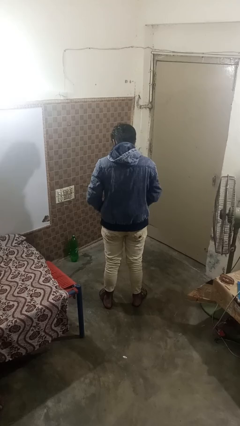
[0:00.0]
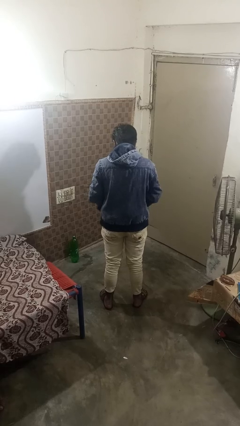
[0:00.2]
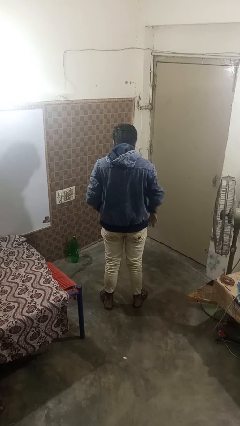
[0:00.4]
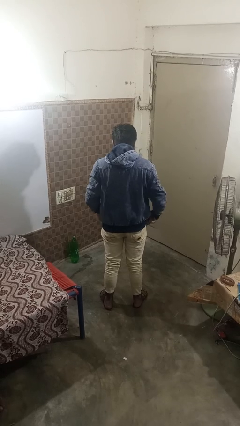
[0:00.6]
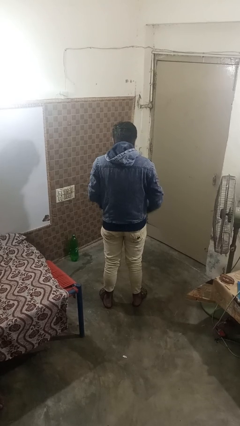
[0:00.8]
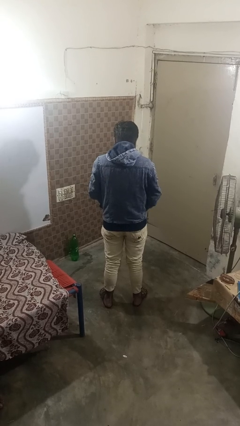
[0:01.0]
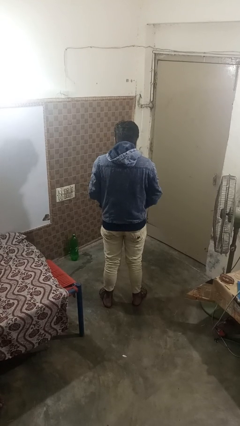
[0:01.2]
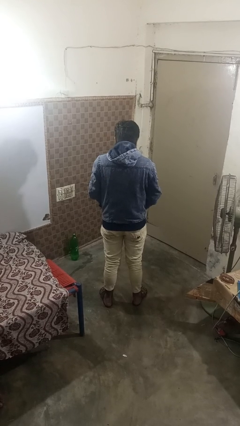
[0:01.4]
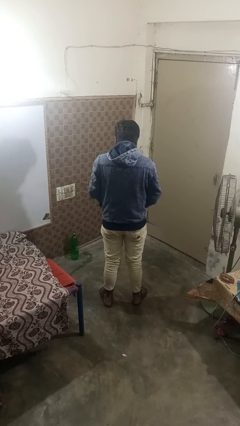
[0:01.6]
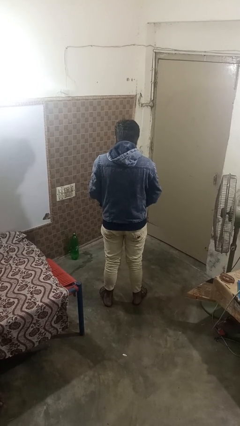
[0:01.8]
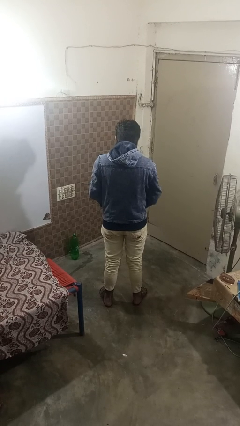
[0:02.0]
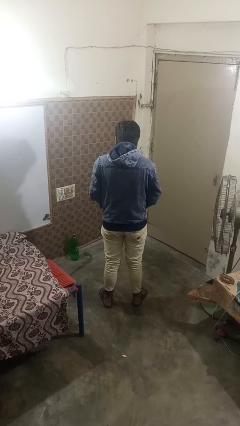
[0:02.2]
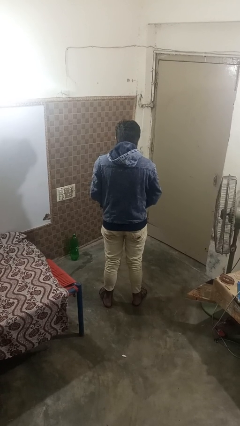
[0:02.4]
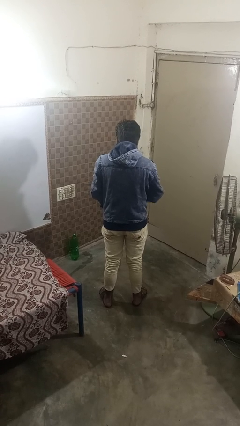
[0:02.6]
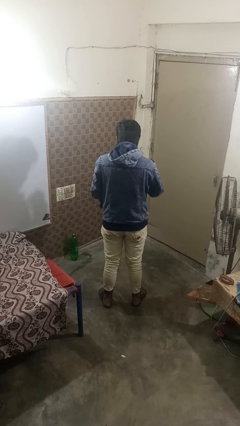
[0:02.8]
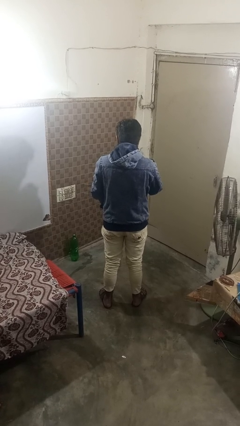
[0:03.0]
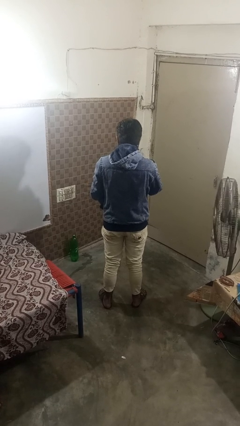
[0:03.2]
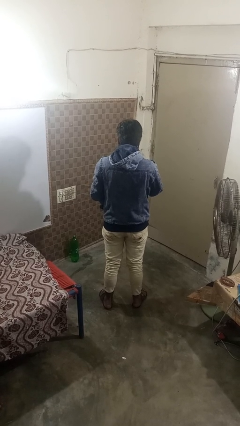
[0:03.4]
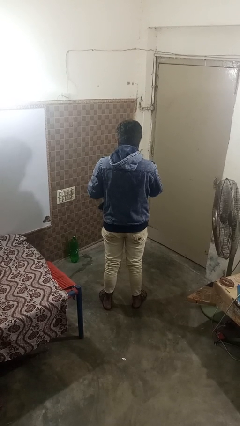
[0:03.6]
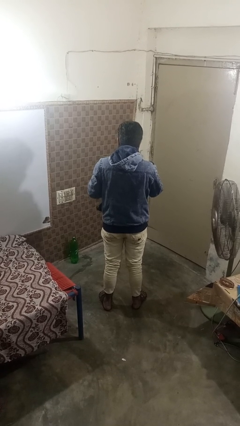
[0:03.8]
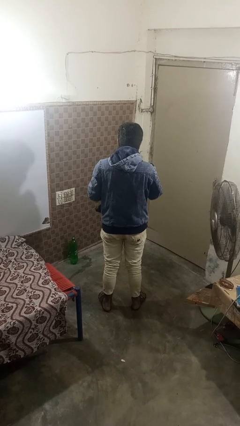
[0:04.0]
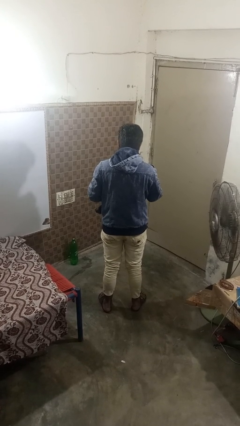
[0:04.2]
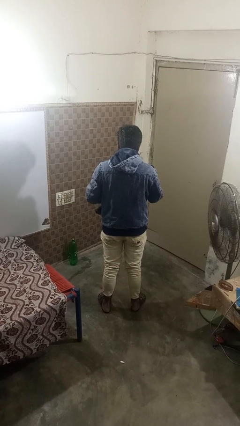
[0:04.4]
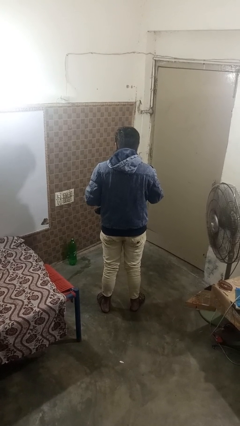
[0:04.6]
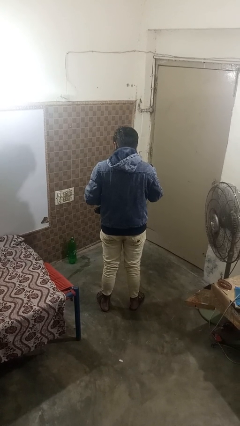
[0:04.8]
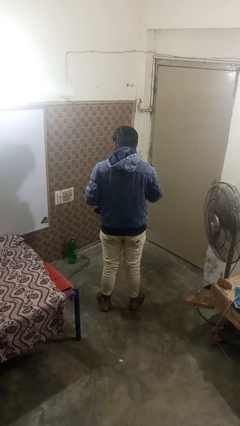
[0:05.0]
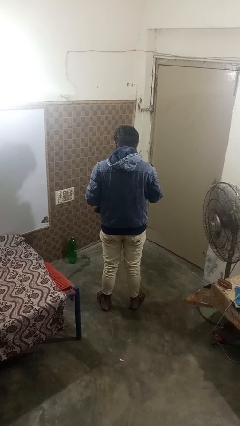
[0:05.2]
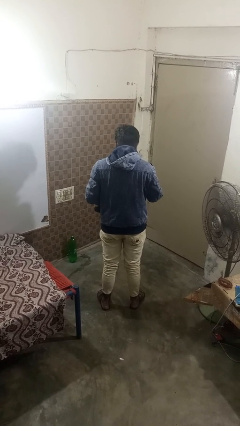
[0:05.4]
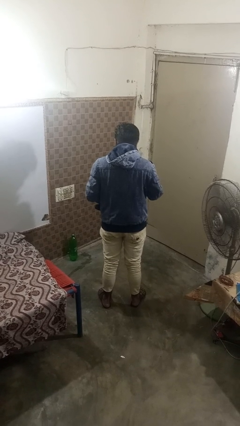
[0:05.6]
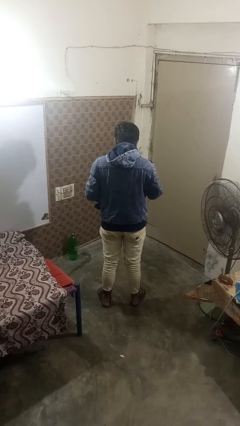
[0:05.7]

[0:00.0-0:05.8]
person zips up jacket

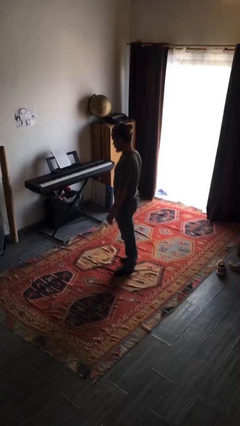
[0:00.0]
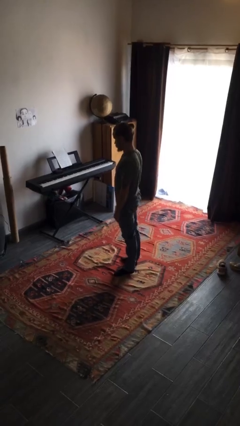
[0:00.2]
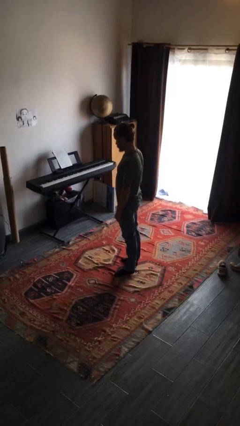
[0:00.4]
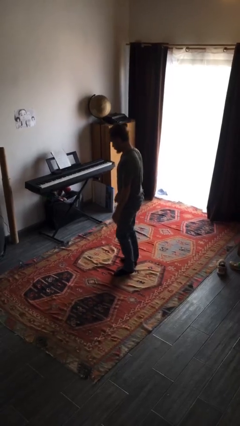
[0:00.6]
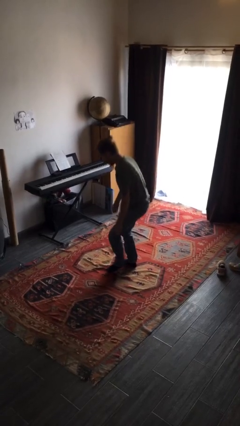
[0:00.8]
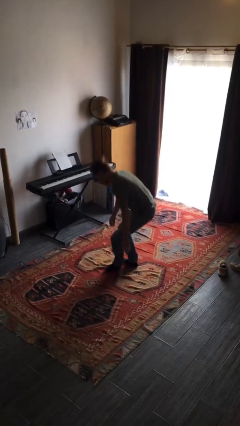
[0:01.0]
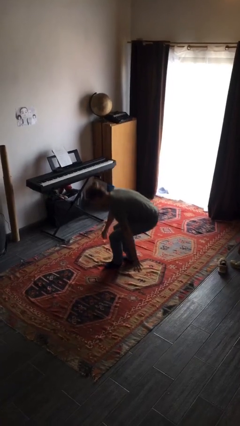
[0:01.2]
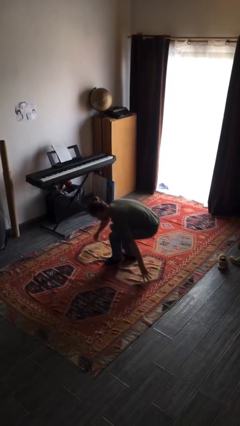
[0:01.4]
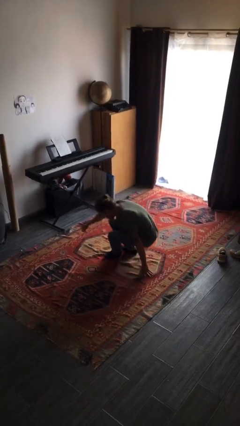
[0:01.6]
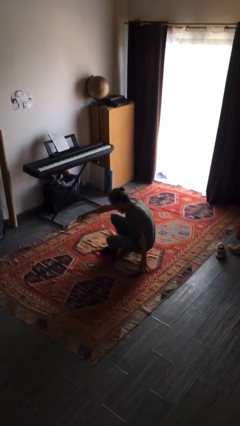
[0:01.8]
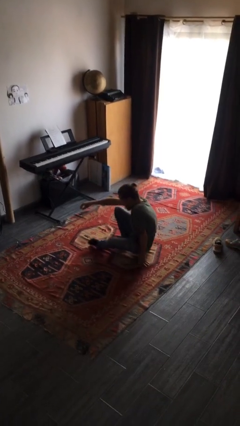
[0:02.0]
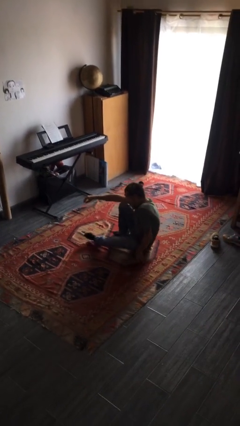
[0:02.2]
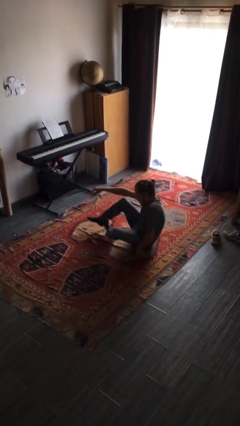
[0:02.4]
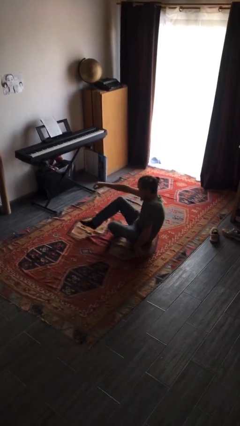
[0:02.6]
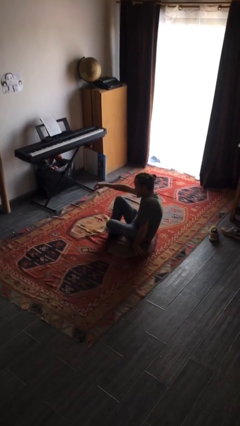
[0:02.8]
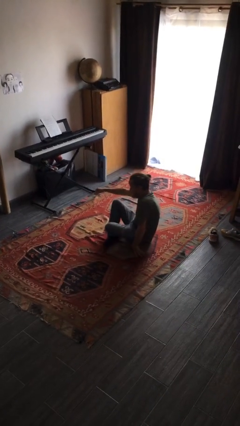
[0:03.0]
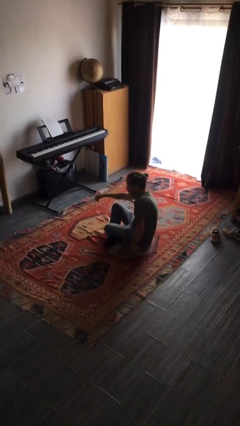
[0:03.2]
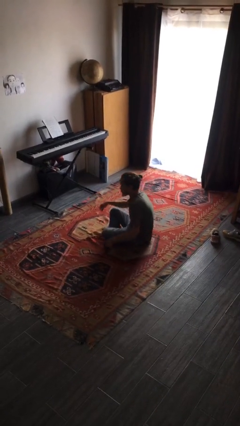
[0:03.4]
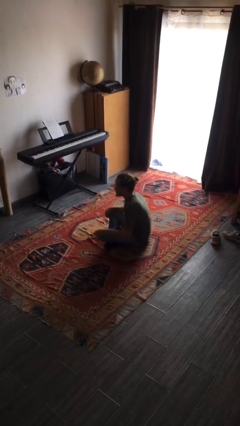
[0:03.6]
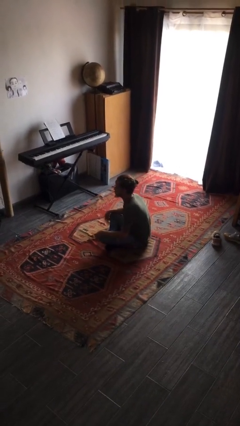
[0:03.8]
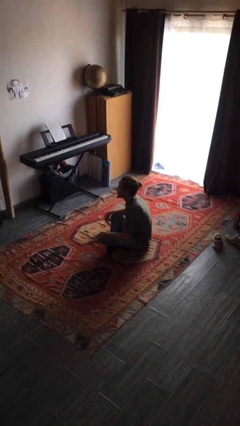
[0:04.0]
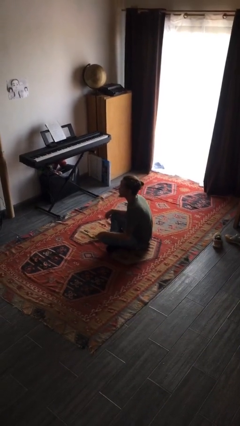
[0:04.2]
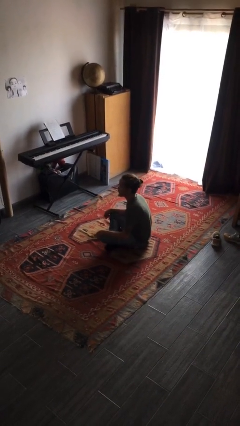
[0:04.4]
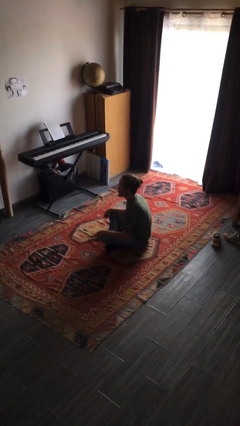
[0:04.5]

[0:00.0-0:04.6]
person sits crisscross

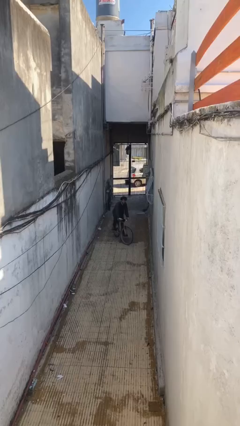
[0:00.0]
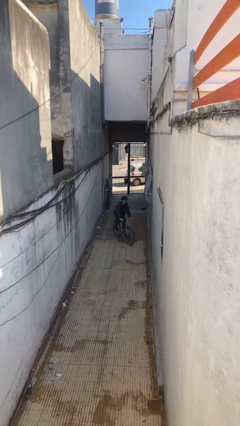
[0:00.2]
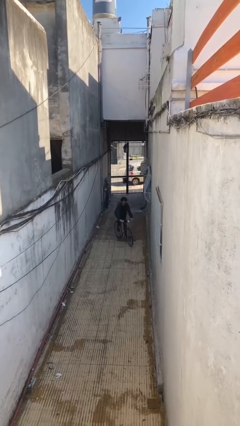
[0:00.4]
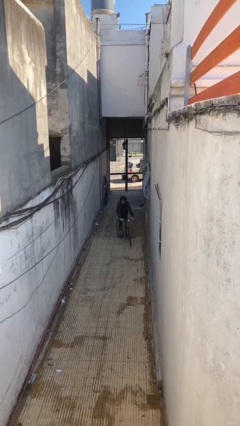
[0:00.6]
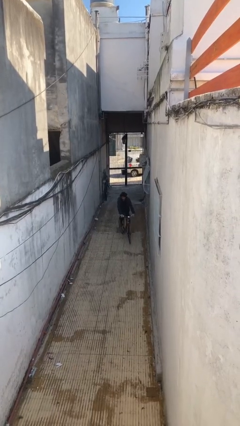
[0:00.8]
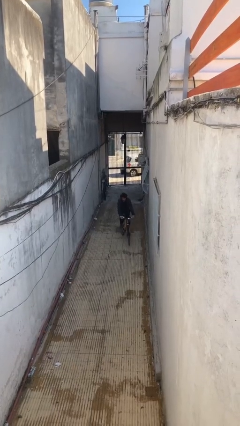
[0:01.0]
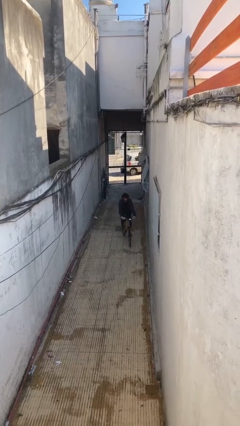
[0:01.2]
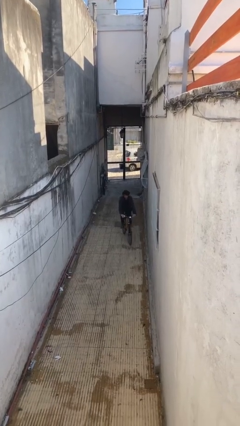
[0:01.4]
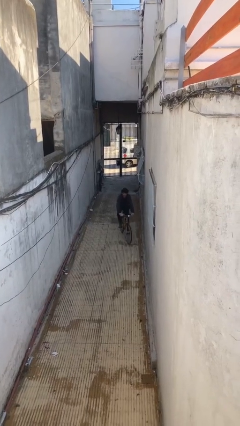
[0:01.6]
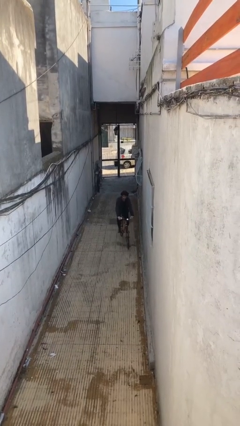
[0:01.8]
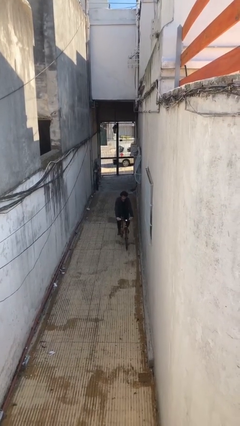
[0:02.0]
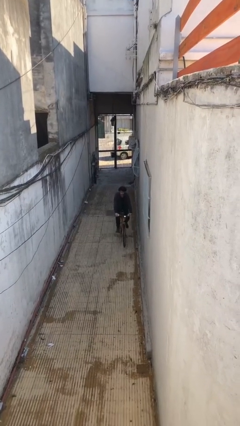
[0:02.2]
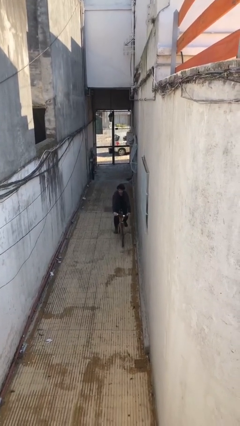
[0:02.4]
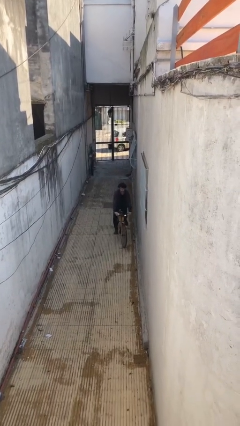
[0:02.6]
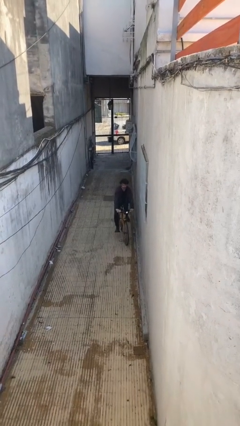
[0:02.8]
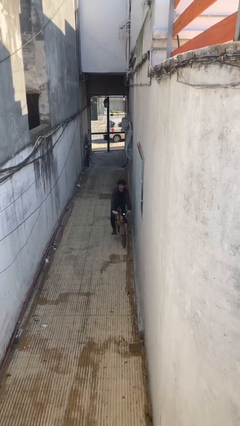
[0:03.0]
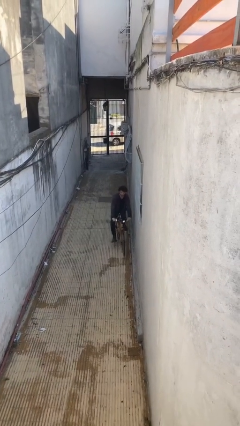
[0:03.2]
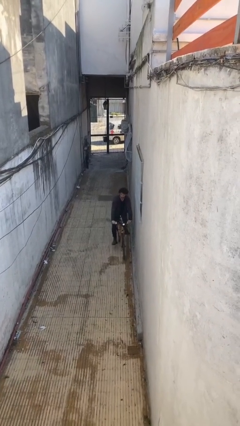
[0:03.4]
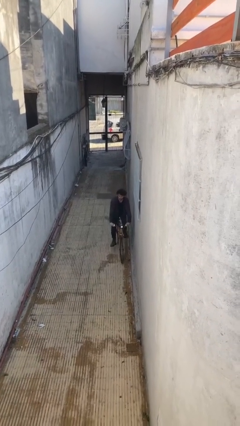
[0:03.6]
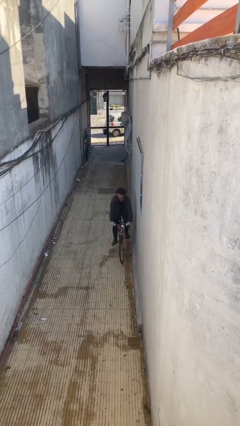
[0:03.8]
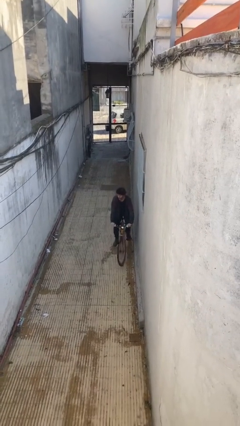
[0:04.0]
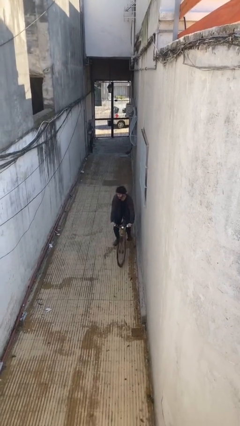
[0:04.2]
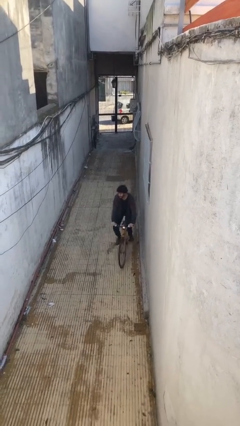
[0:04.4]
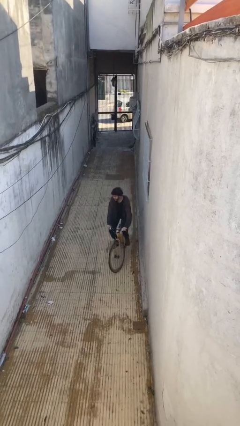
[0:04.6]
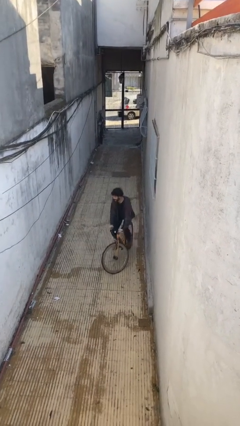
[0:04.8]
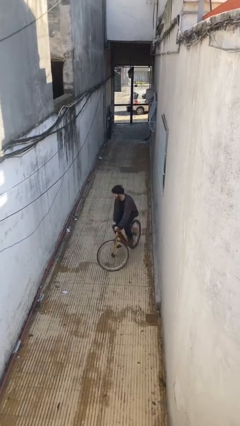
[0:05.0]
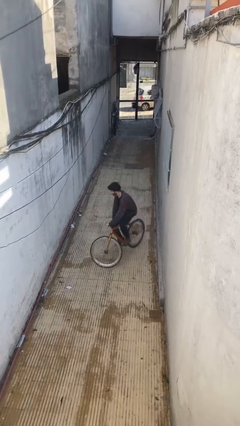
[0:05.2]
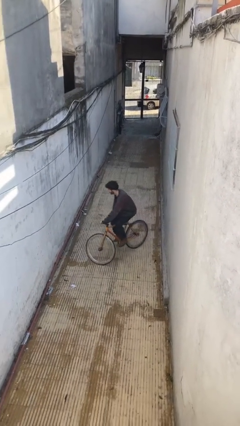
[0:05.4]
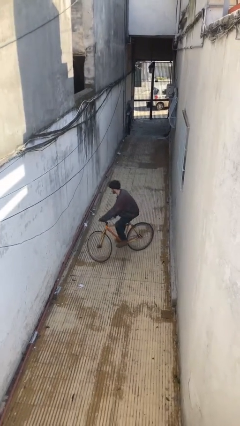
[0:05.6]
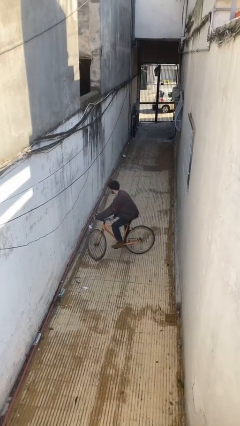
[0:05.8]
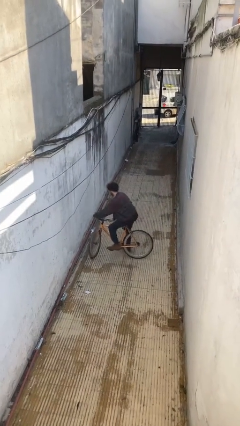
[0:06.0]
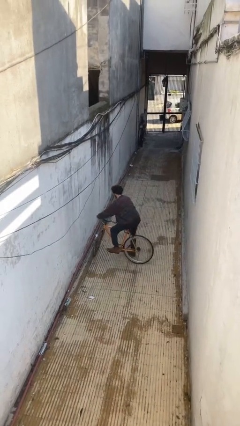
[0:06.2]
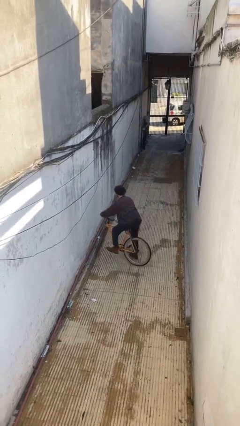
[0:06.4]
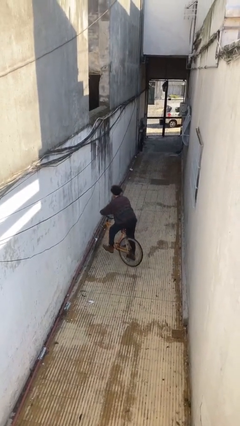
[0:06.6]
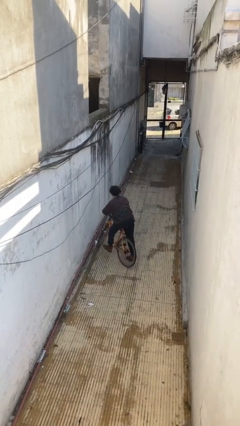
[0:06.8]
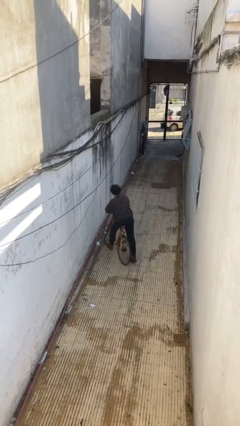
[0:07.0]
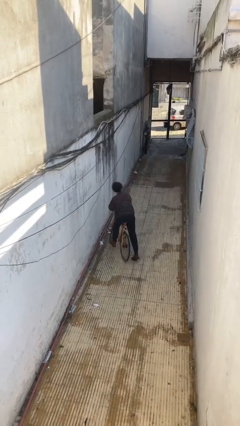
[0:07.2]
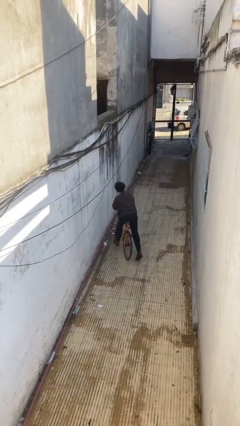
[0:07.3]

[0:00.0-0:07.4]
person rides bicycle
